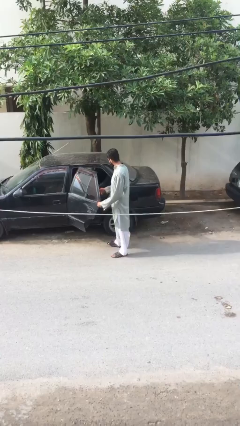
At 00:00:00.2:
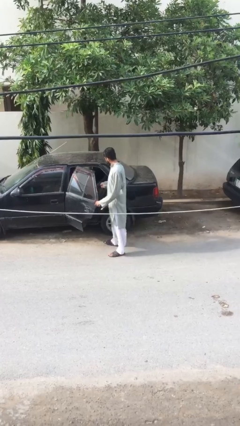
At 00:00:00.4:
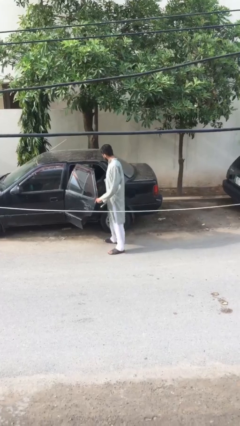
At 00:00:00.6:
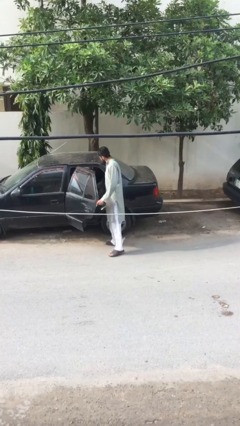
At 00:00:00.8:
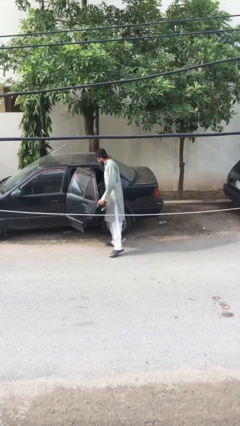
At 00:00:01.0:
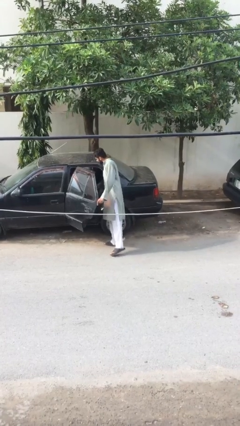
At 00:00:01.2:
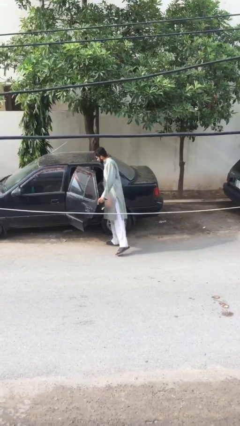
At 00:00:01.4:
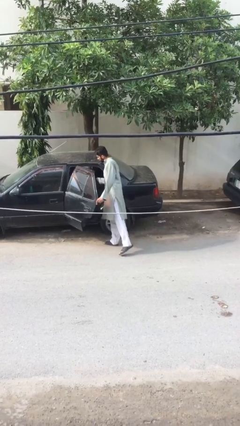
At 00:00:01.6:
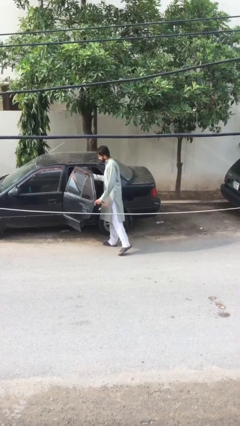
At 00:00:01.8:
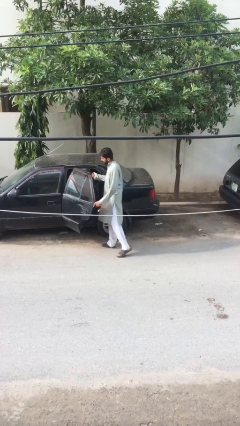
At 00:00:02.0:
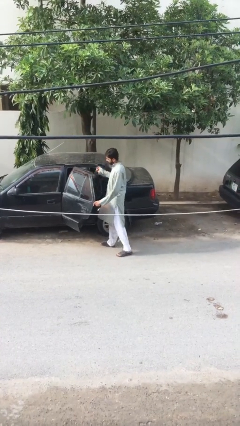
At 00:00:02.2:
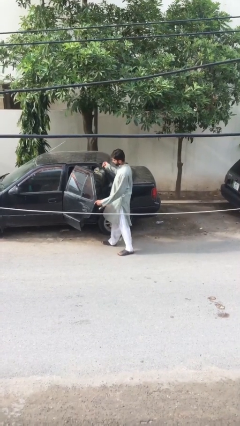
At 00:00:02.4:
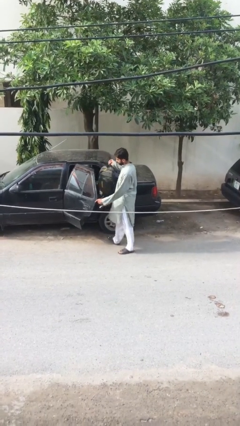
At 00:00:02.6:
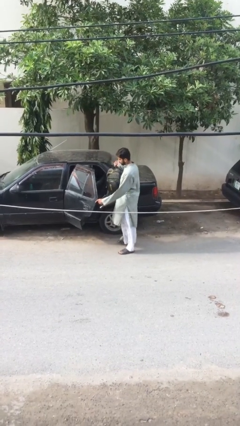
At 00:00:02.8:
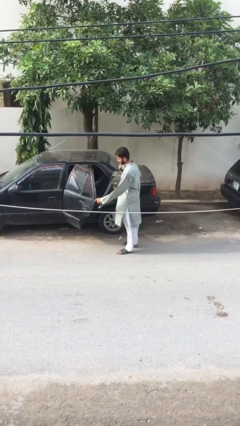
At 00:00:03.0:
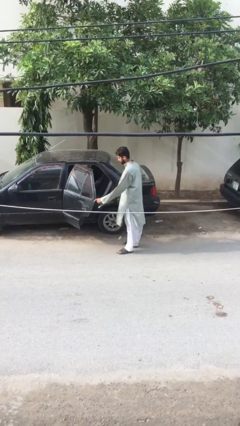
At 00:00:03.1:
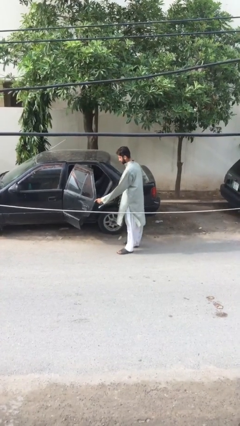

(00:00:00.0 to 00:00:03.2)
person unloads car

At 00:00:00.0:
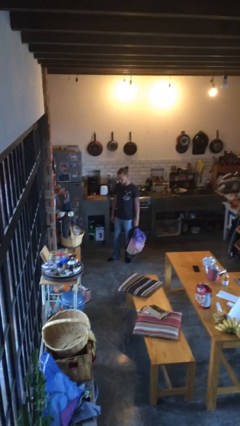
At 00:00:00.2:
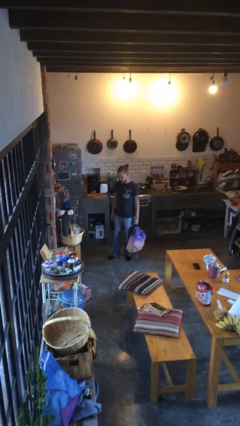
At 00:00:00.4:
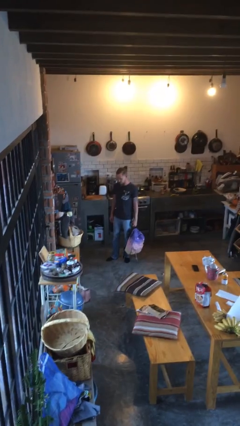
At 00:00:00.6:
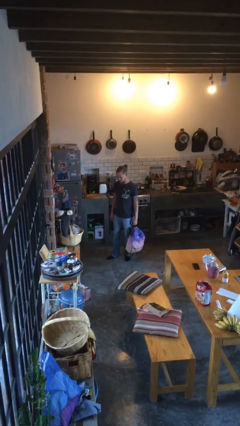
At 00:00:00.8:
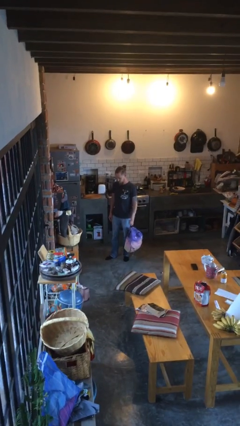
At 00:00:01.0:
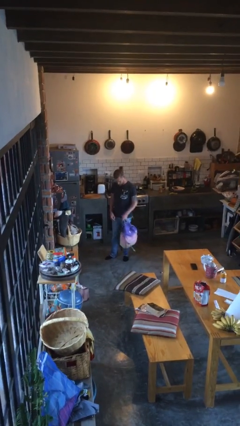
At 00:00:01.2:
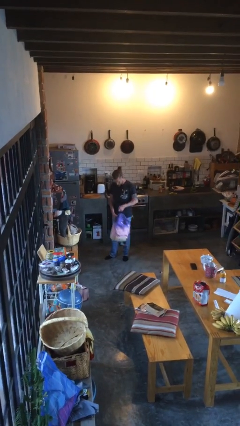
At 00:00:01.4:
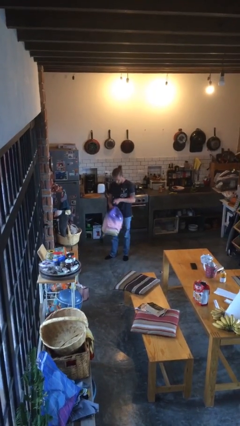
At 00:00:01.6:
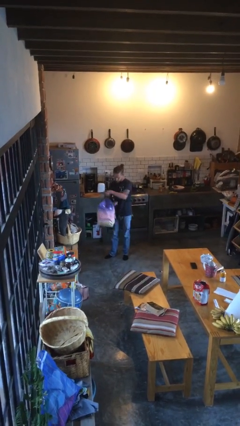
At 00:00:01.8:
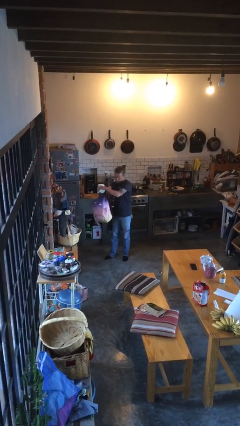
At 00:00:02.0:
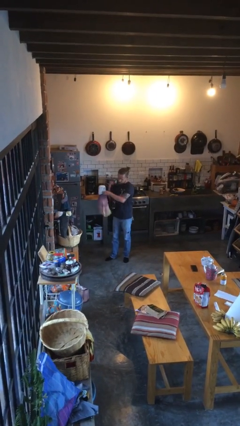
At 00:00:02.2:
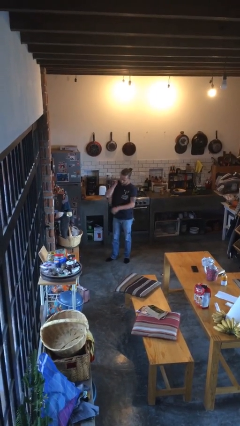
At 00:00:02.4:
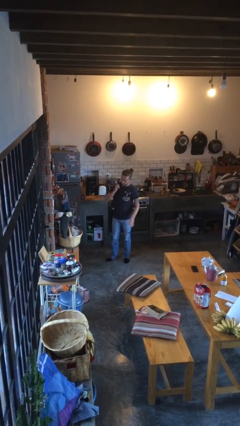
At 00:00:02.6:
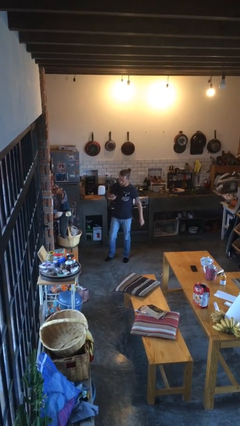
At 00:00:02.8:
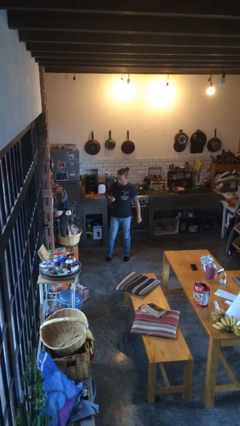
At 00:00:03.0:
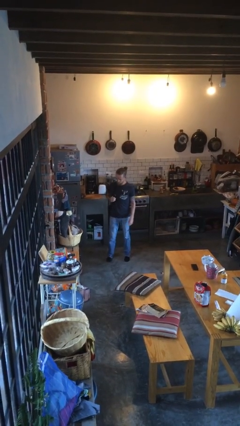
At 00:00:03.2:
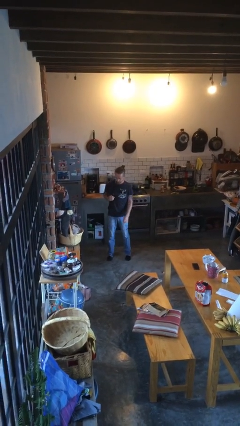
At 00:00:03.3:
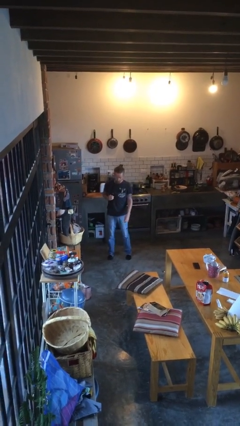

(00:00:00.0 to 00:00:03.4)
person puts on backpack

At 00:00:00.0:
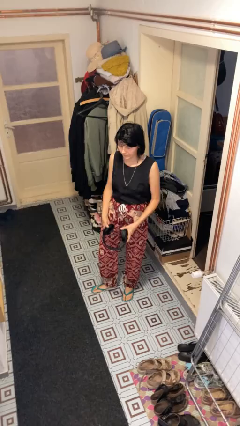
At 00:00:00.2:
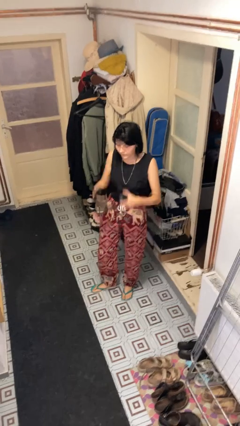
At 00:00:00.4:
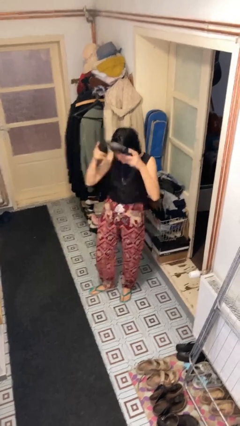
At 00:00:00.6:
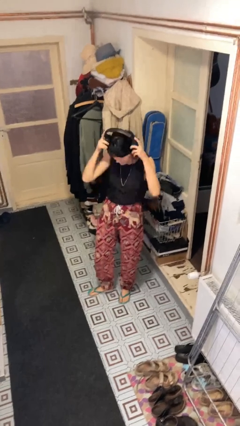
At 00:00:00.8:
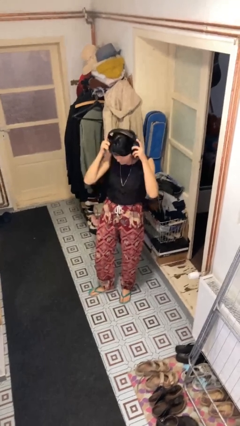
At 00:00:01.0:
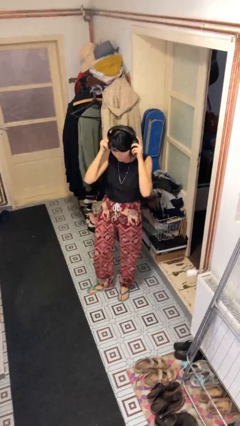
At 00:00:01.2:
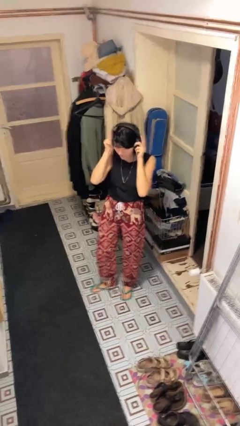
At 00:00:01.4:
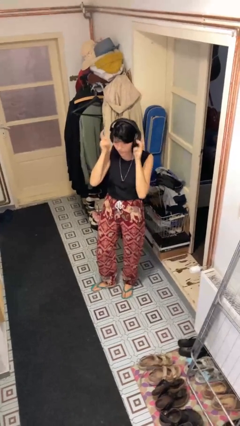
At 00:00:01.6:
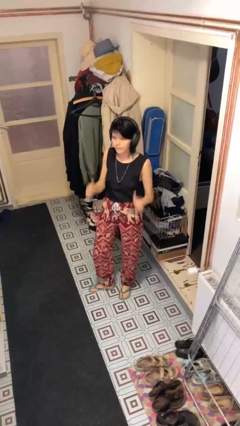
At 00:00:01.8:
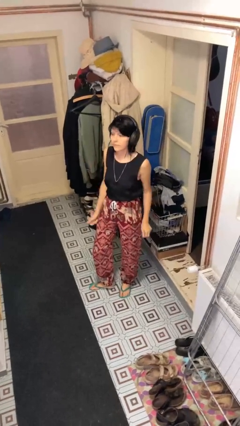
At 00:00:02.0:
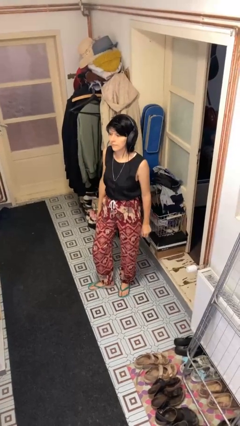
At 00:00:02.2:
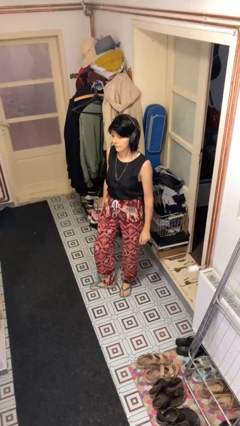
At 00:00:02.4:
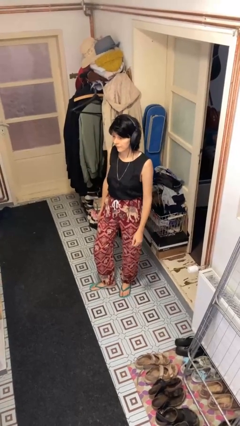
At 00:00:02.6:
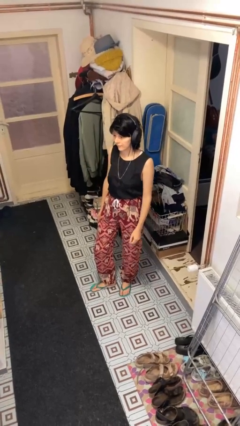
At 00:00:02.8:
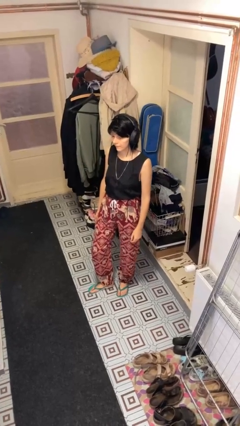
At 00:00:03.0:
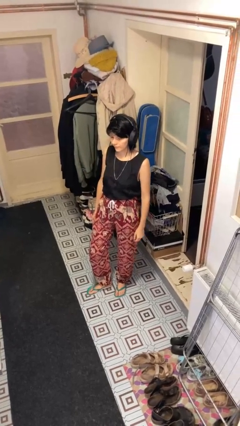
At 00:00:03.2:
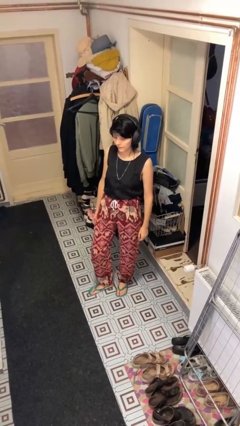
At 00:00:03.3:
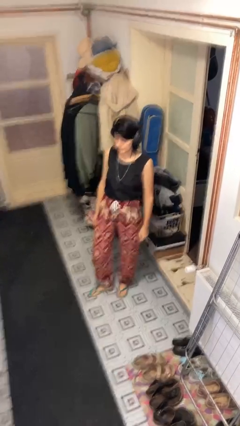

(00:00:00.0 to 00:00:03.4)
person puts on headphones

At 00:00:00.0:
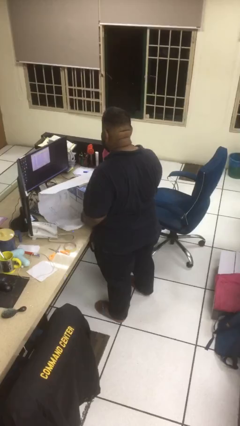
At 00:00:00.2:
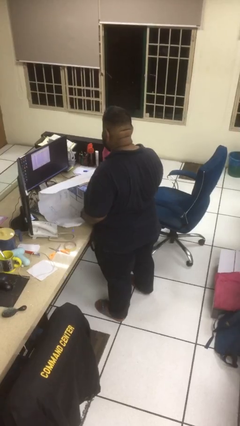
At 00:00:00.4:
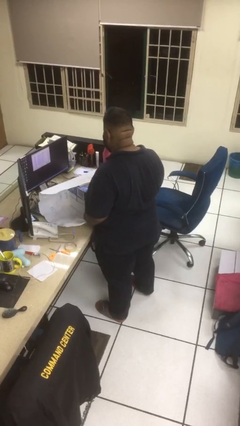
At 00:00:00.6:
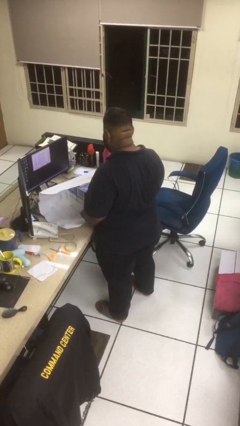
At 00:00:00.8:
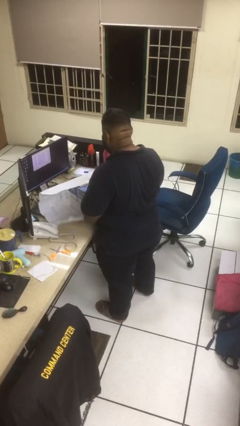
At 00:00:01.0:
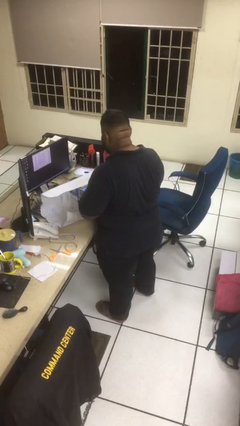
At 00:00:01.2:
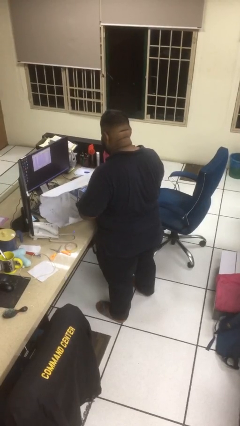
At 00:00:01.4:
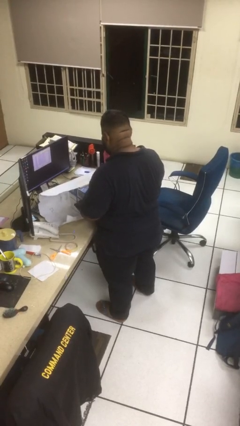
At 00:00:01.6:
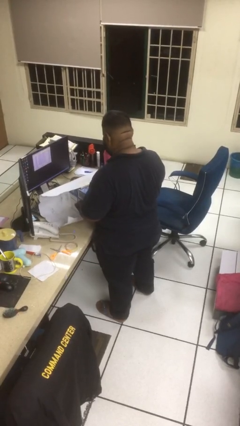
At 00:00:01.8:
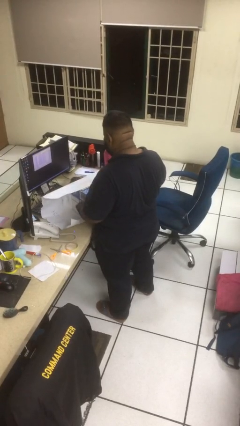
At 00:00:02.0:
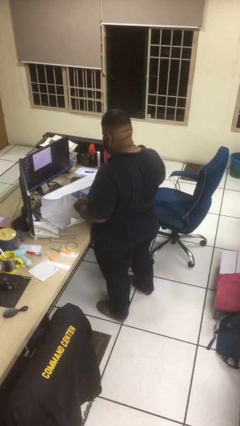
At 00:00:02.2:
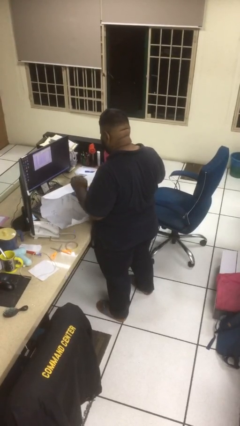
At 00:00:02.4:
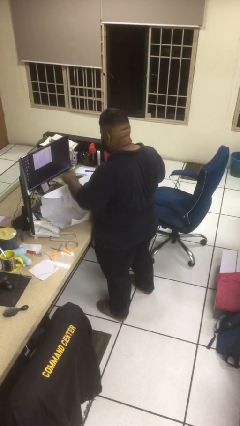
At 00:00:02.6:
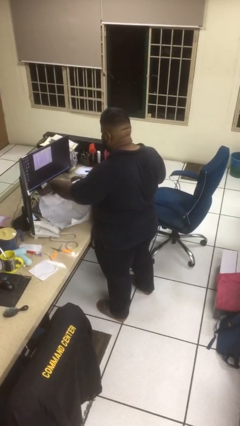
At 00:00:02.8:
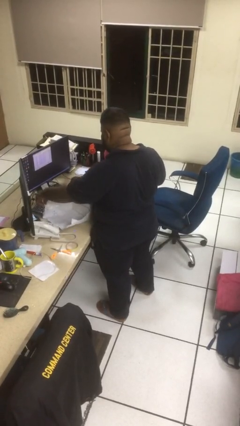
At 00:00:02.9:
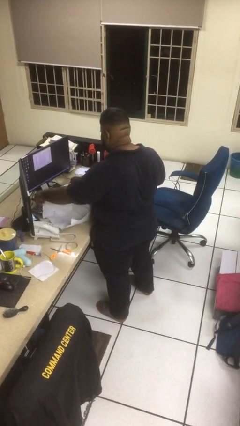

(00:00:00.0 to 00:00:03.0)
person wraps box

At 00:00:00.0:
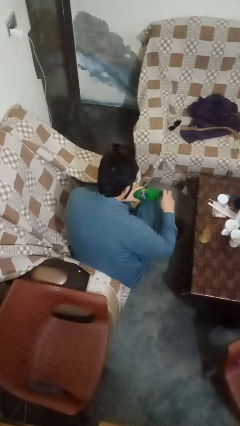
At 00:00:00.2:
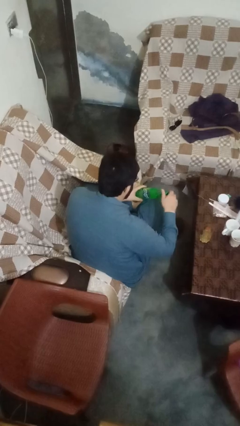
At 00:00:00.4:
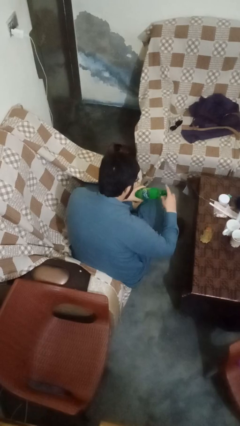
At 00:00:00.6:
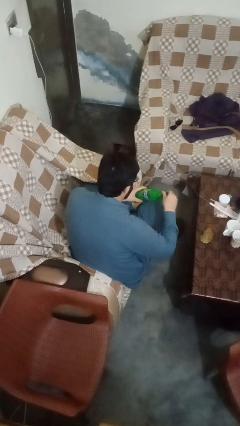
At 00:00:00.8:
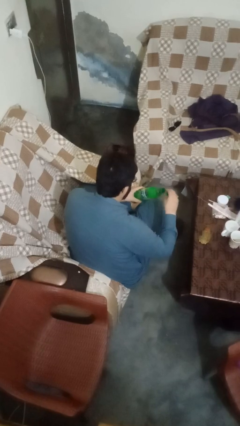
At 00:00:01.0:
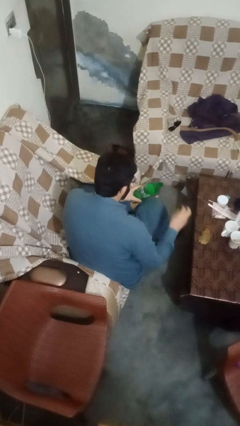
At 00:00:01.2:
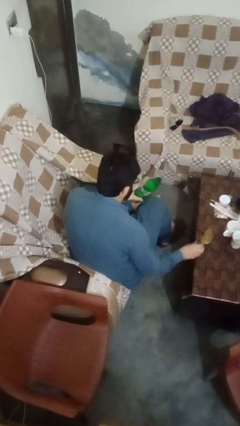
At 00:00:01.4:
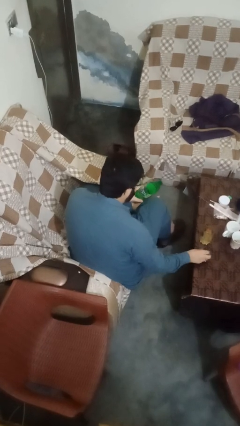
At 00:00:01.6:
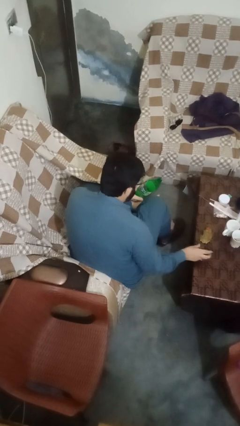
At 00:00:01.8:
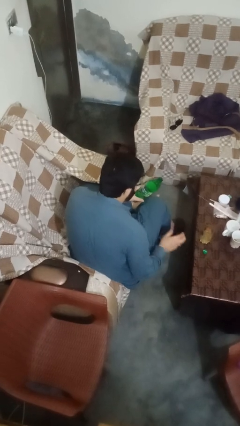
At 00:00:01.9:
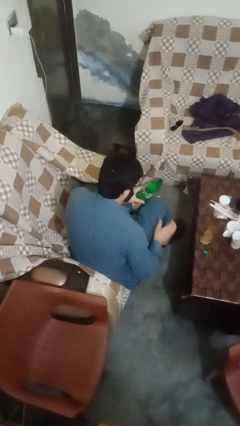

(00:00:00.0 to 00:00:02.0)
person unscrews lid from bottle

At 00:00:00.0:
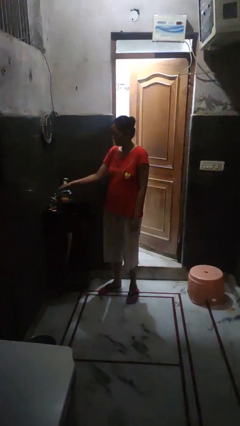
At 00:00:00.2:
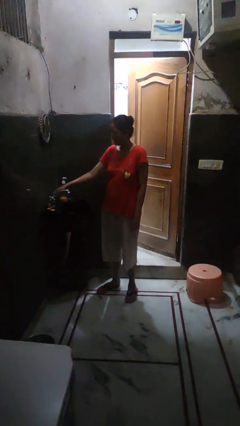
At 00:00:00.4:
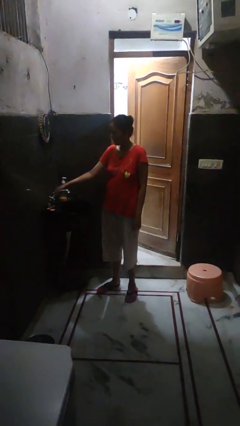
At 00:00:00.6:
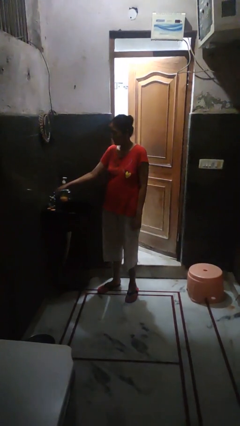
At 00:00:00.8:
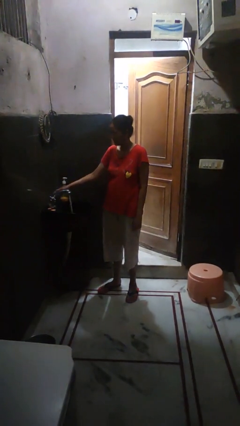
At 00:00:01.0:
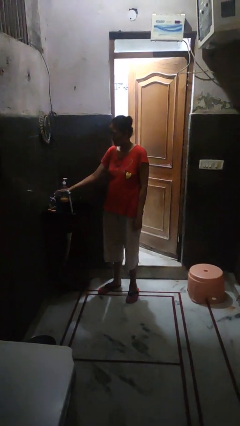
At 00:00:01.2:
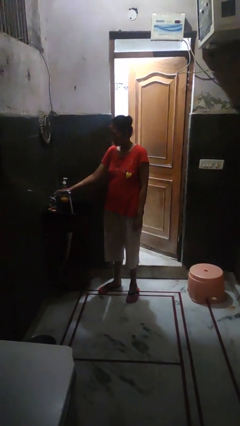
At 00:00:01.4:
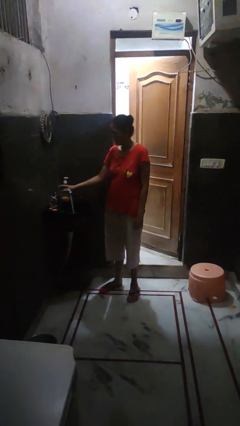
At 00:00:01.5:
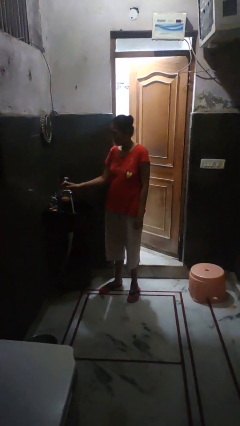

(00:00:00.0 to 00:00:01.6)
person turns on faucet

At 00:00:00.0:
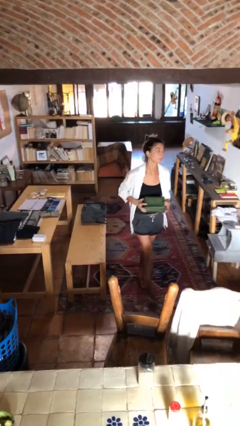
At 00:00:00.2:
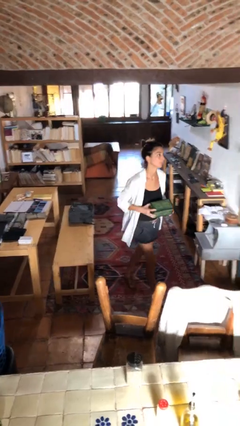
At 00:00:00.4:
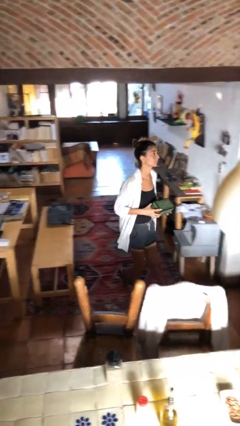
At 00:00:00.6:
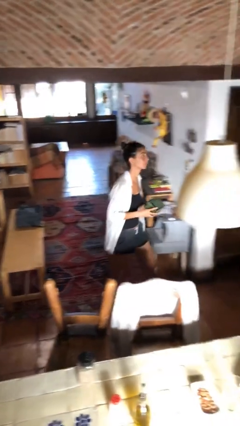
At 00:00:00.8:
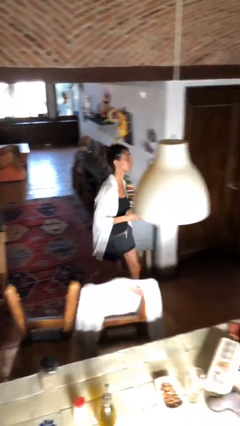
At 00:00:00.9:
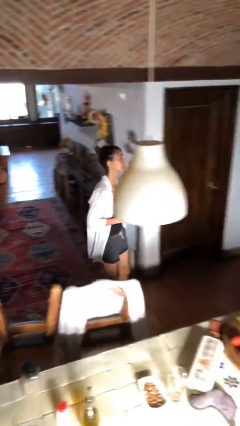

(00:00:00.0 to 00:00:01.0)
person picks up object from table
